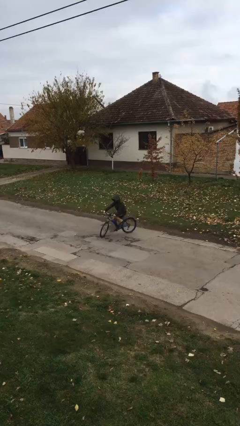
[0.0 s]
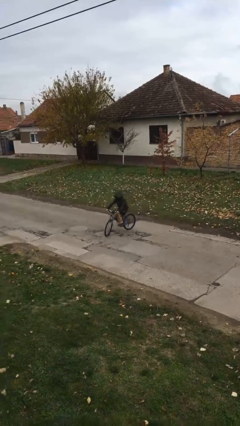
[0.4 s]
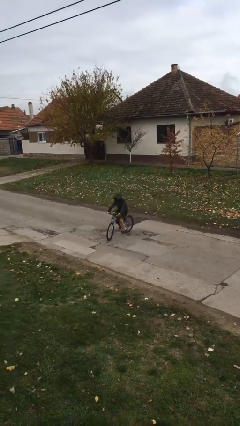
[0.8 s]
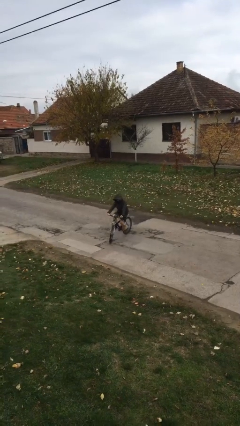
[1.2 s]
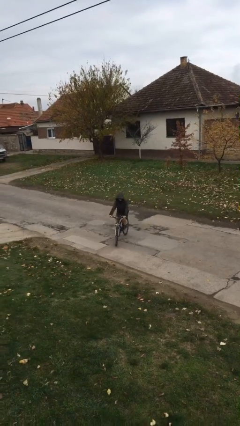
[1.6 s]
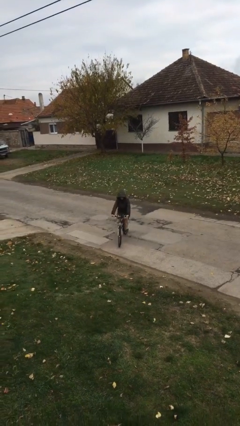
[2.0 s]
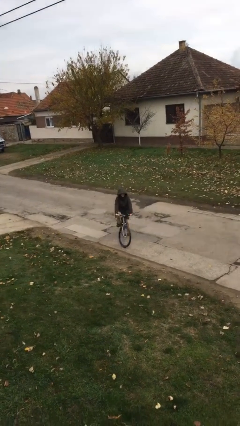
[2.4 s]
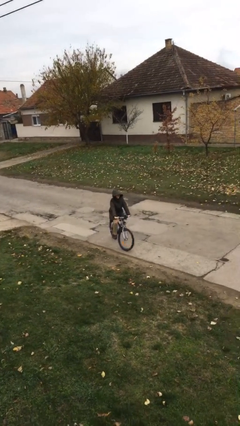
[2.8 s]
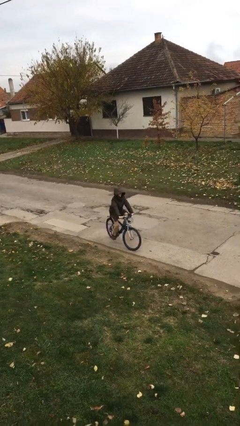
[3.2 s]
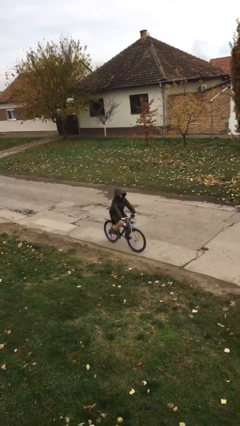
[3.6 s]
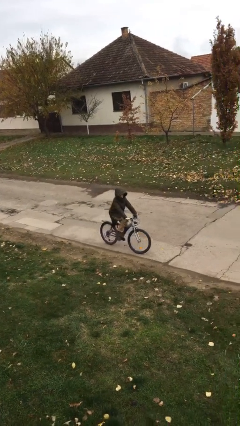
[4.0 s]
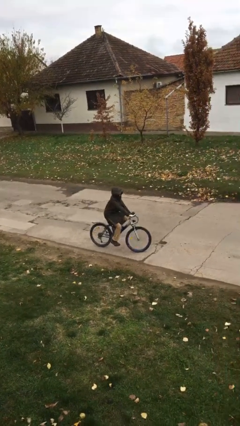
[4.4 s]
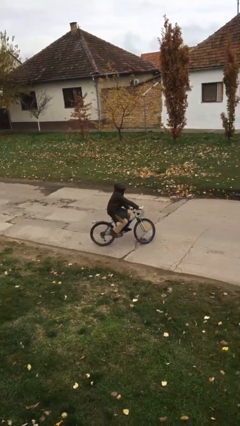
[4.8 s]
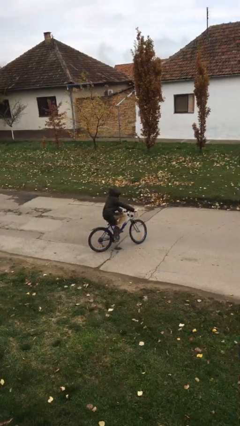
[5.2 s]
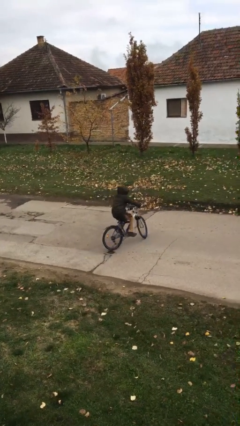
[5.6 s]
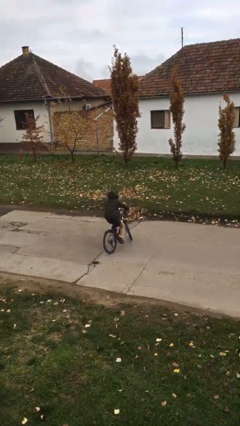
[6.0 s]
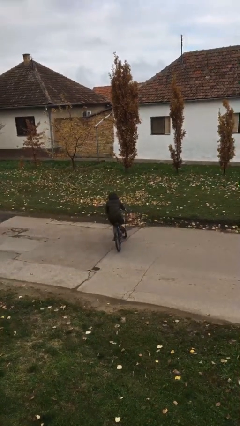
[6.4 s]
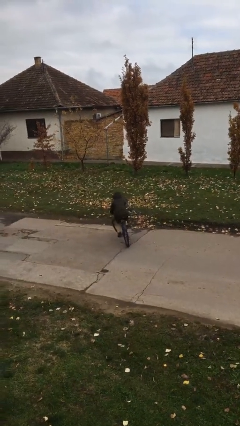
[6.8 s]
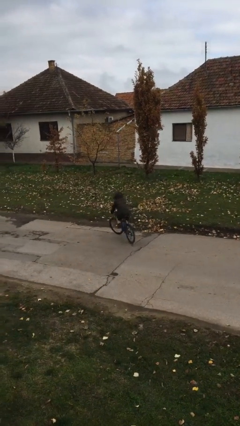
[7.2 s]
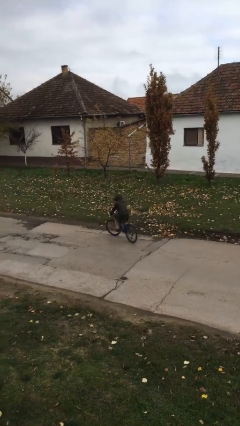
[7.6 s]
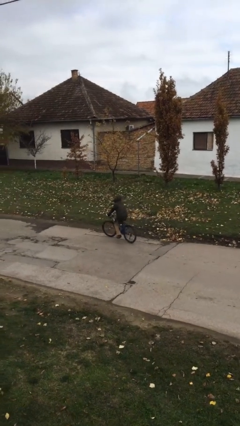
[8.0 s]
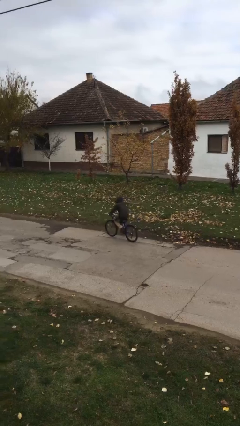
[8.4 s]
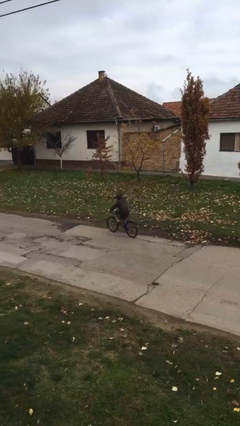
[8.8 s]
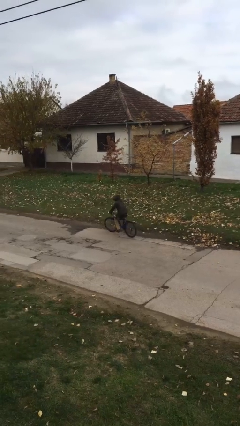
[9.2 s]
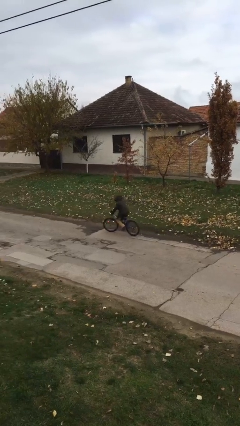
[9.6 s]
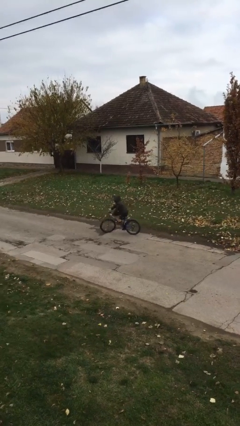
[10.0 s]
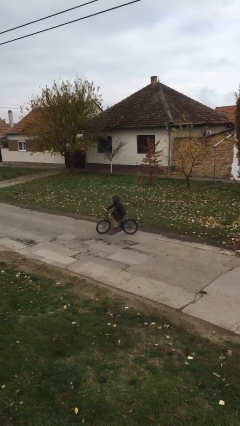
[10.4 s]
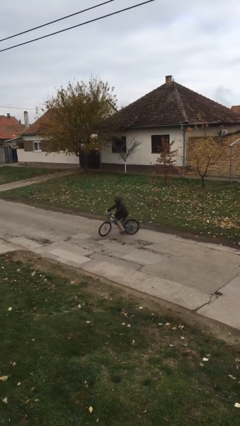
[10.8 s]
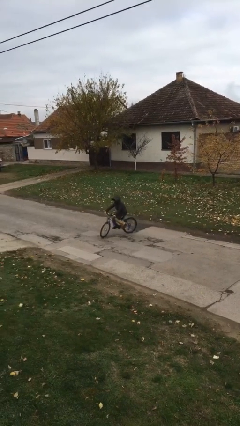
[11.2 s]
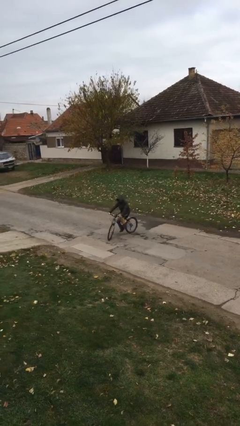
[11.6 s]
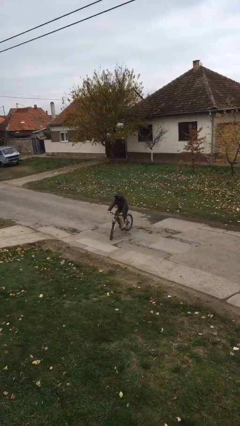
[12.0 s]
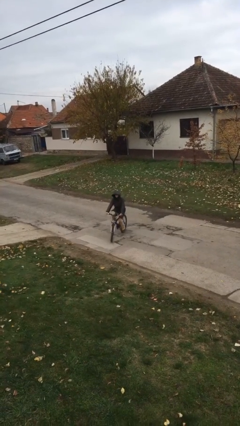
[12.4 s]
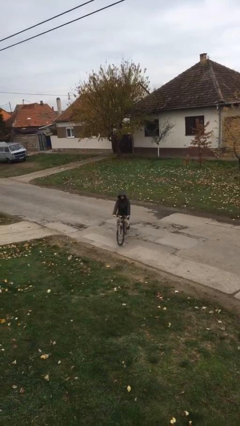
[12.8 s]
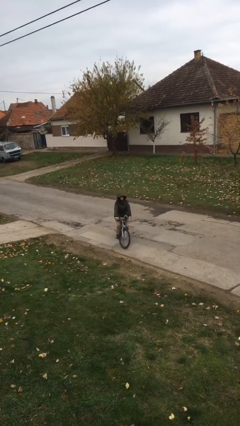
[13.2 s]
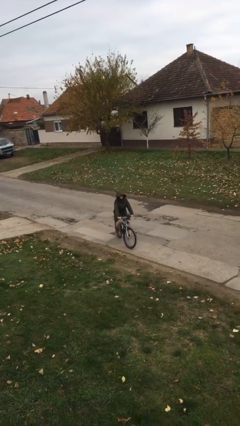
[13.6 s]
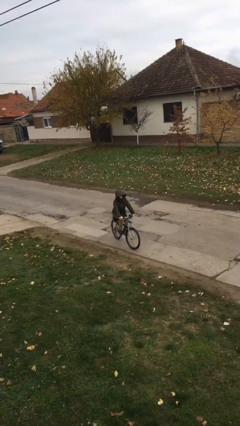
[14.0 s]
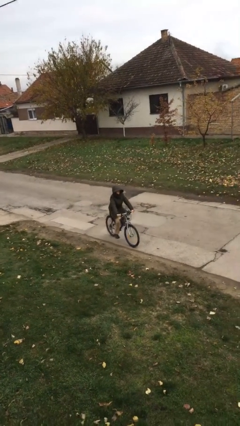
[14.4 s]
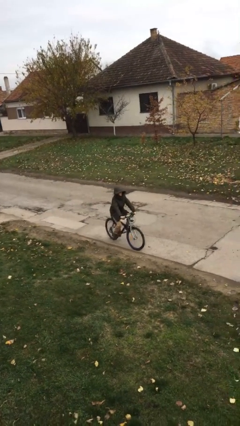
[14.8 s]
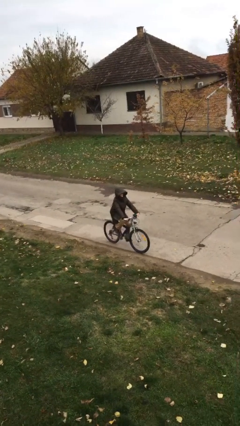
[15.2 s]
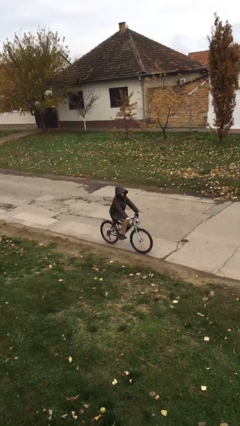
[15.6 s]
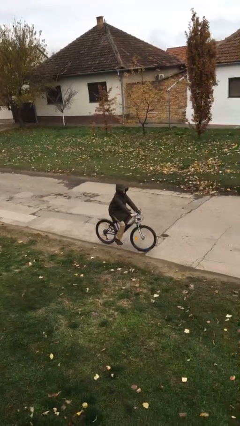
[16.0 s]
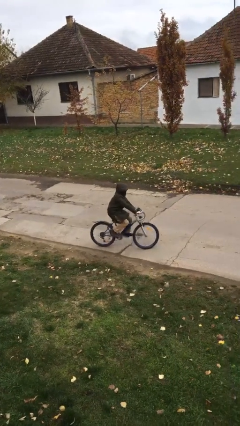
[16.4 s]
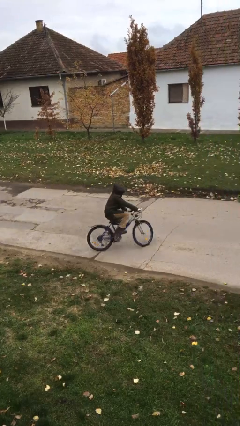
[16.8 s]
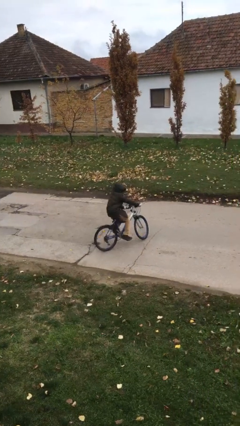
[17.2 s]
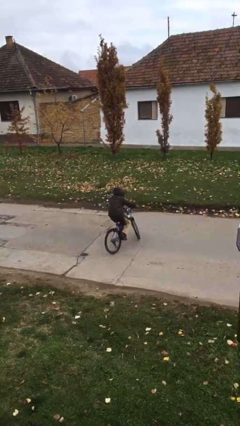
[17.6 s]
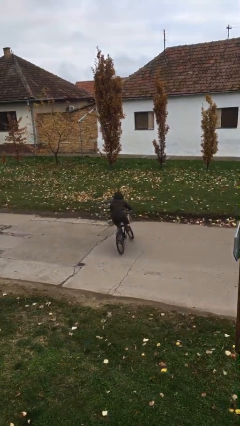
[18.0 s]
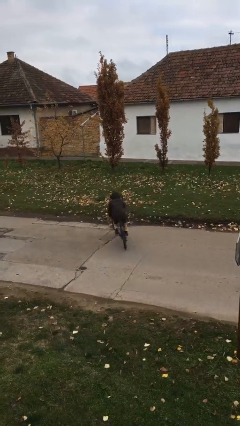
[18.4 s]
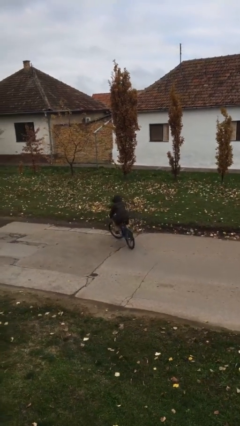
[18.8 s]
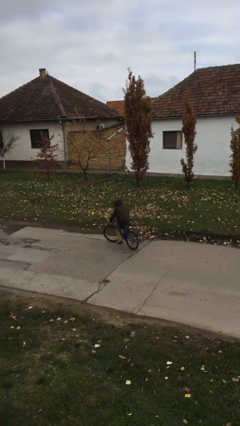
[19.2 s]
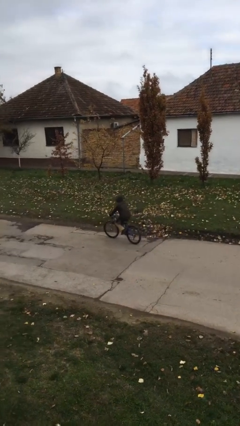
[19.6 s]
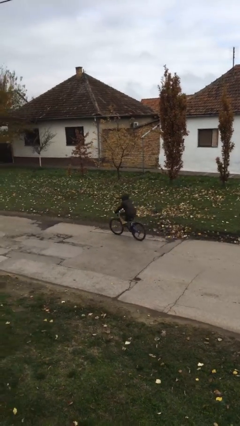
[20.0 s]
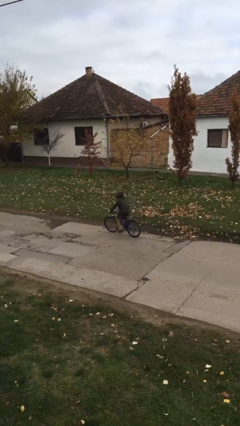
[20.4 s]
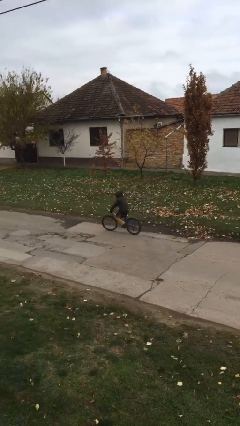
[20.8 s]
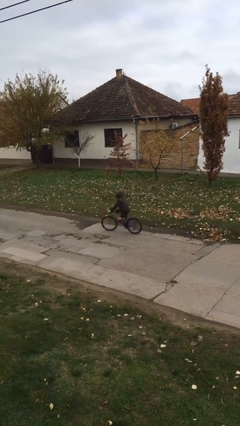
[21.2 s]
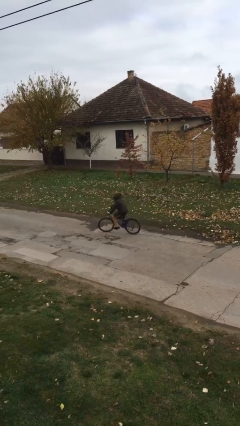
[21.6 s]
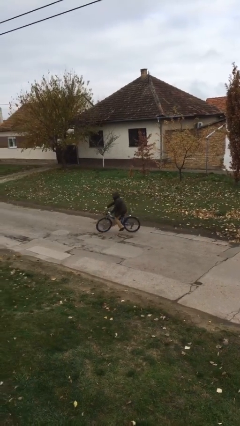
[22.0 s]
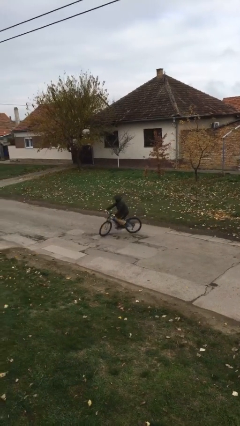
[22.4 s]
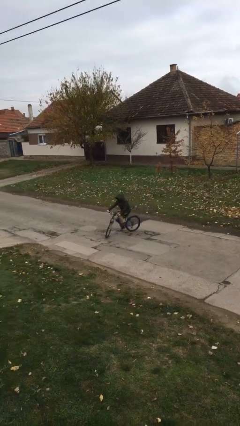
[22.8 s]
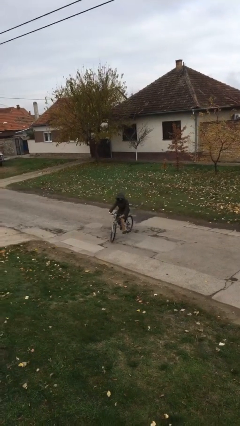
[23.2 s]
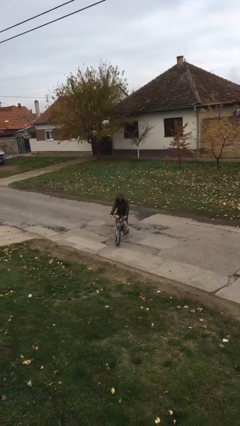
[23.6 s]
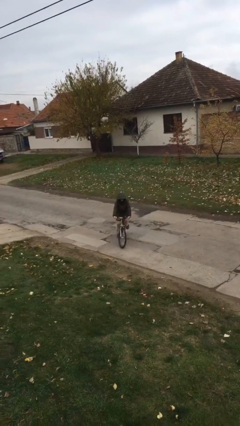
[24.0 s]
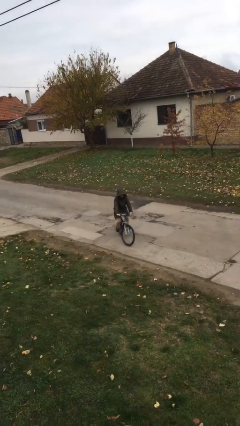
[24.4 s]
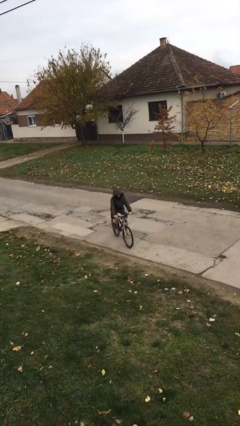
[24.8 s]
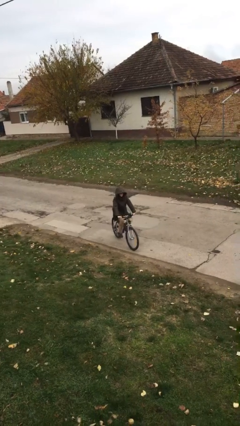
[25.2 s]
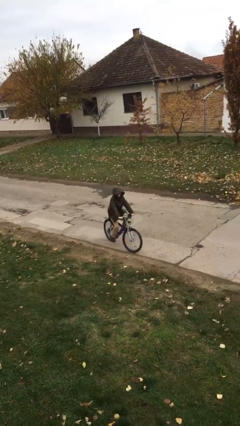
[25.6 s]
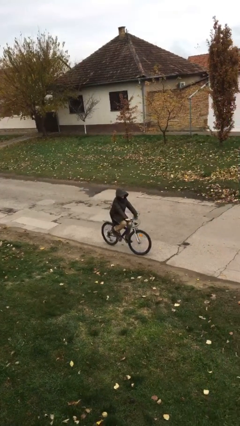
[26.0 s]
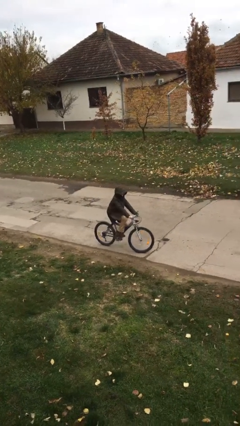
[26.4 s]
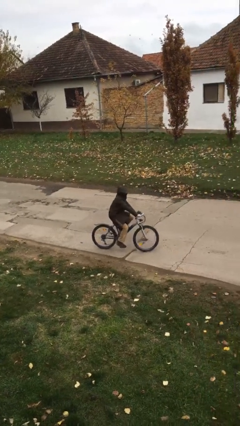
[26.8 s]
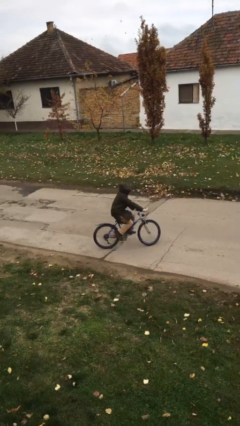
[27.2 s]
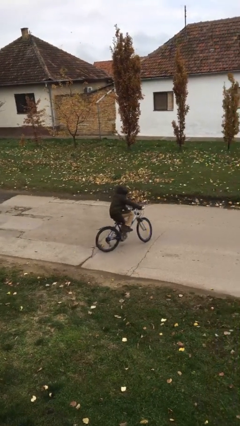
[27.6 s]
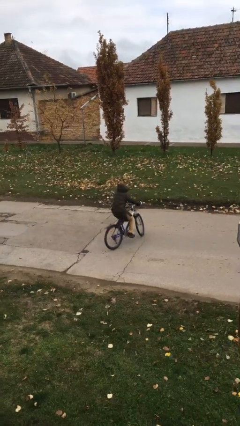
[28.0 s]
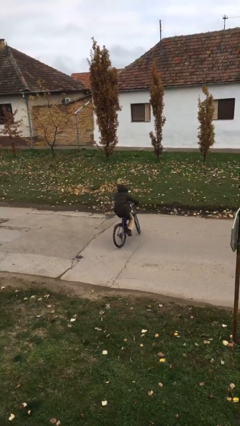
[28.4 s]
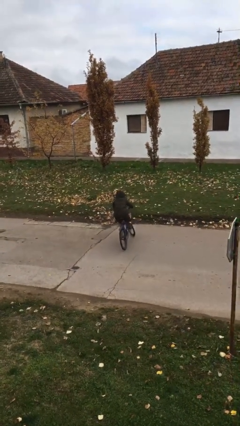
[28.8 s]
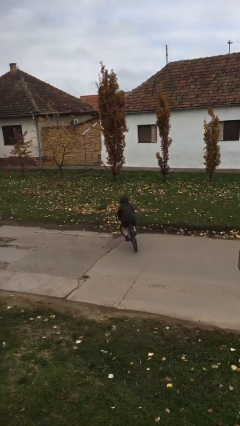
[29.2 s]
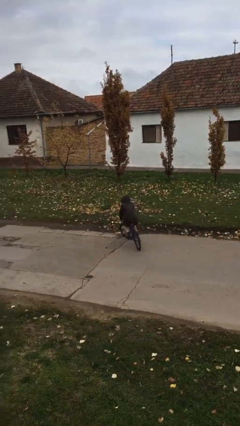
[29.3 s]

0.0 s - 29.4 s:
person rides bicycle

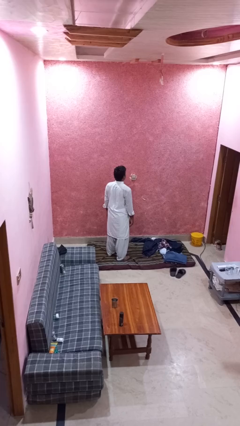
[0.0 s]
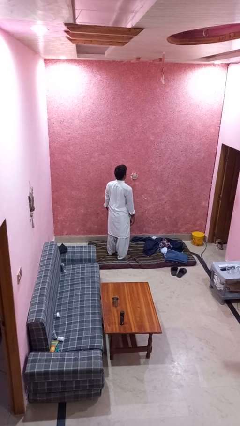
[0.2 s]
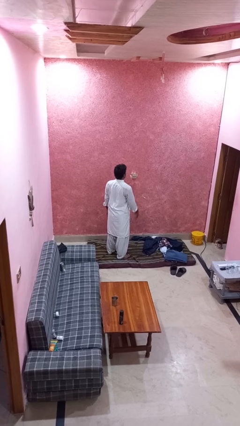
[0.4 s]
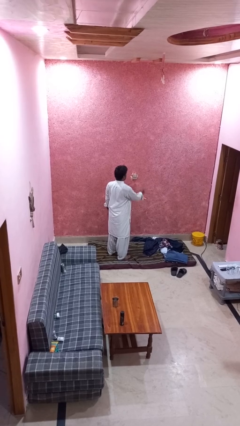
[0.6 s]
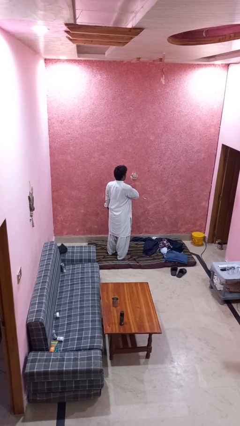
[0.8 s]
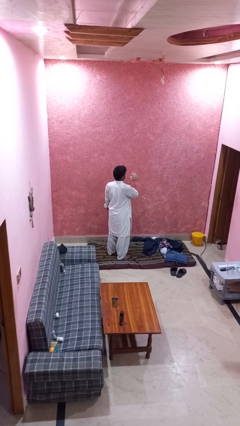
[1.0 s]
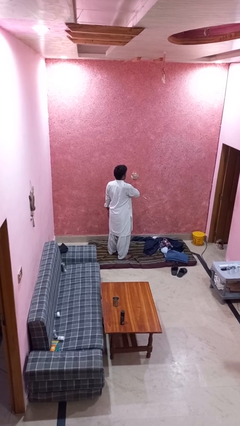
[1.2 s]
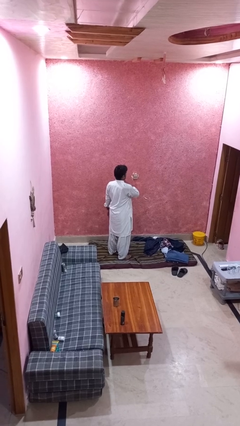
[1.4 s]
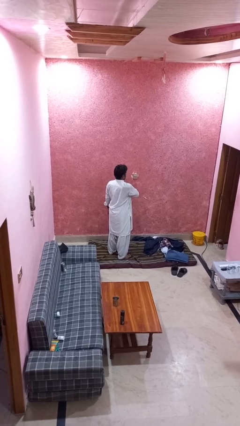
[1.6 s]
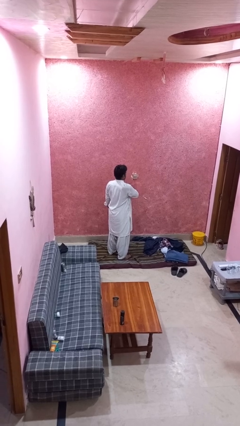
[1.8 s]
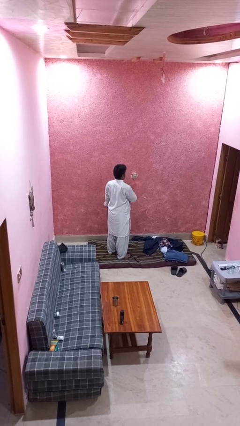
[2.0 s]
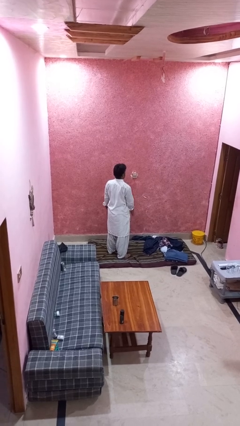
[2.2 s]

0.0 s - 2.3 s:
person drums on chest

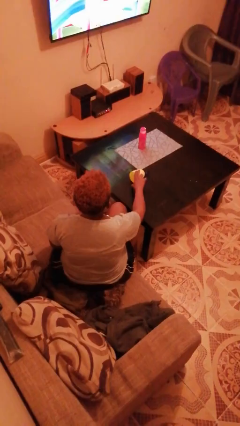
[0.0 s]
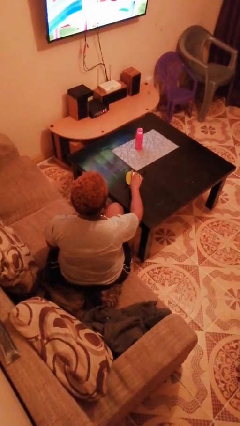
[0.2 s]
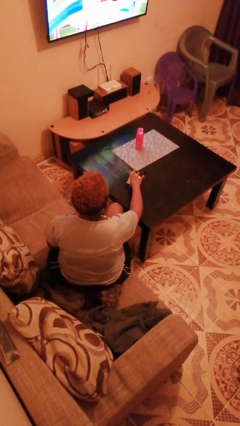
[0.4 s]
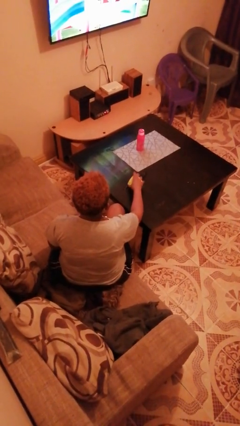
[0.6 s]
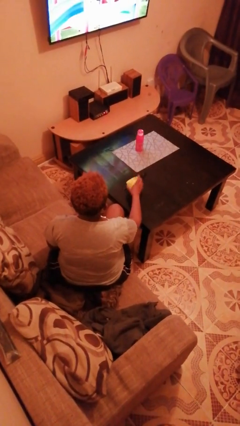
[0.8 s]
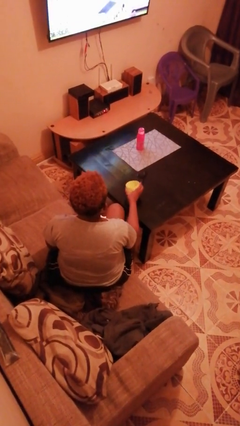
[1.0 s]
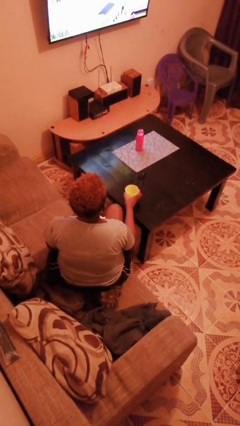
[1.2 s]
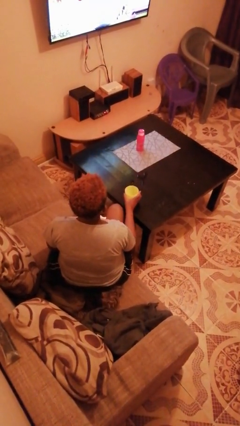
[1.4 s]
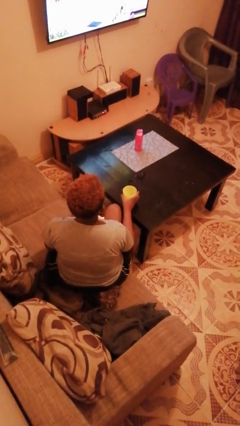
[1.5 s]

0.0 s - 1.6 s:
person sets upright glass
